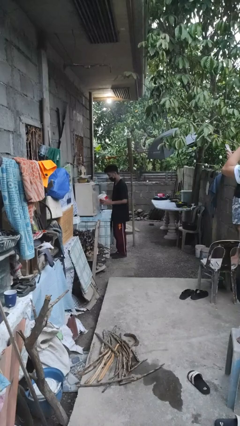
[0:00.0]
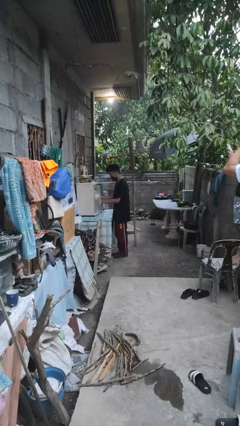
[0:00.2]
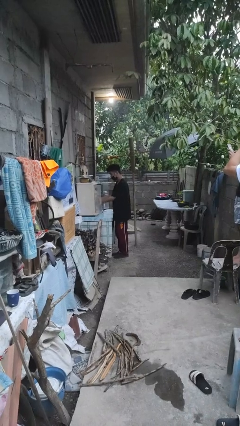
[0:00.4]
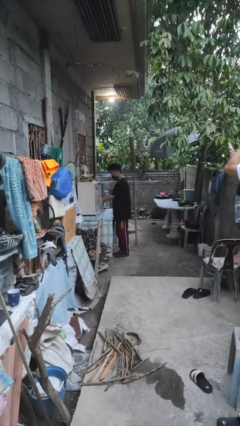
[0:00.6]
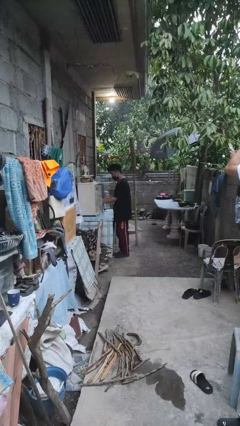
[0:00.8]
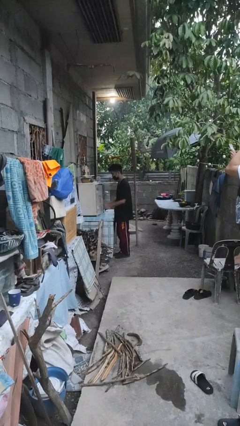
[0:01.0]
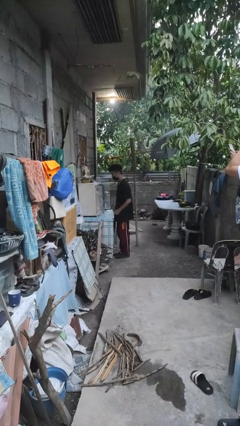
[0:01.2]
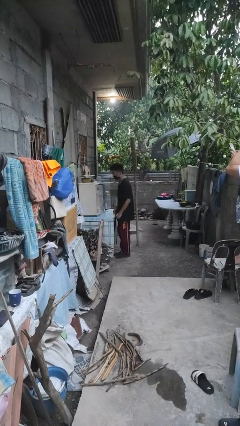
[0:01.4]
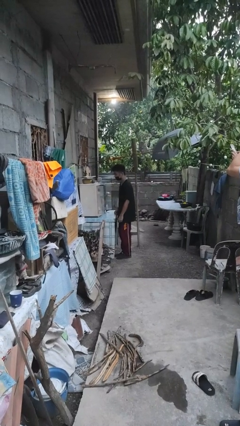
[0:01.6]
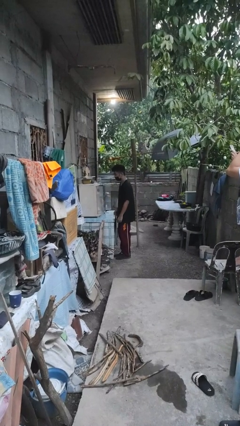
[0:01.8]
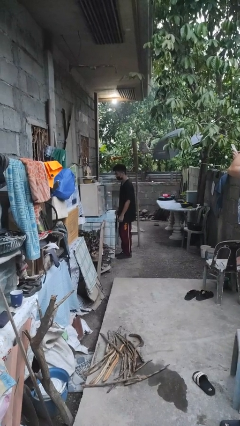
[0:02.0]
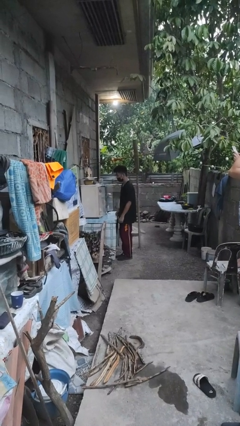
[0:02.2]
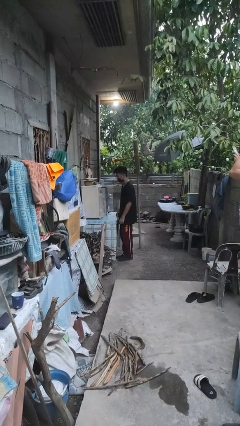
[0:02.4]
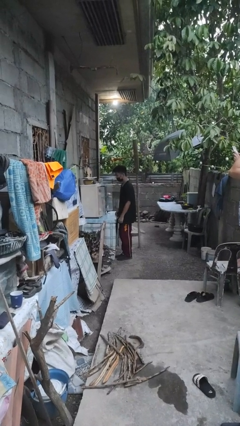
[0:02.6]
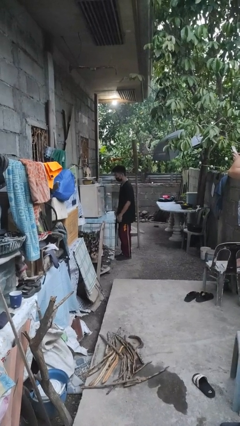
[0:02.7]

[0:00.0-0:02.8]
person puts down object into cabinet

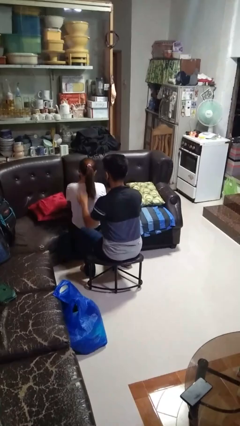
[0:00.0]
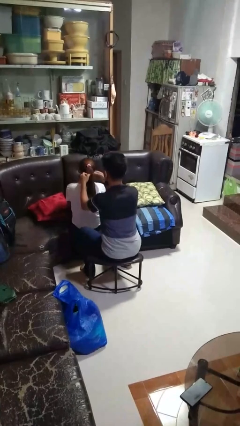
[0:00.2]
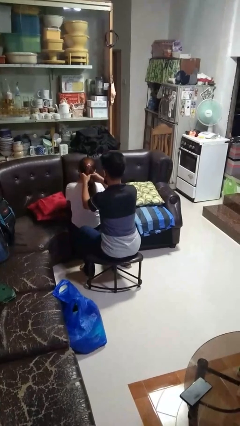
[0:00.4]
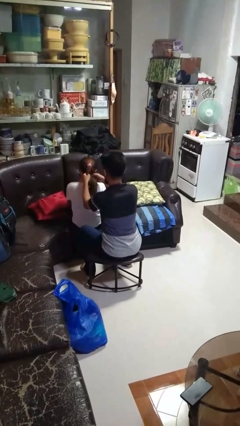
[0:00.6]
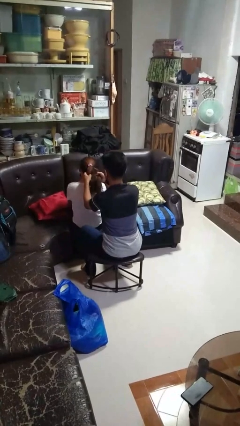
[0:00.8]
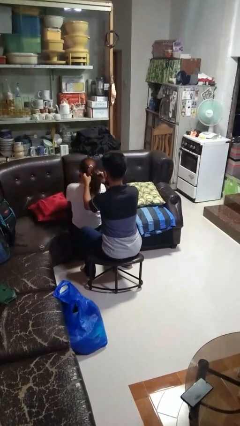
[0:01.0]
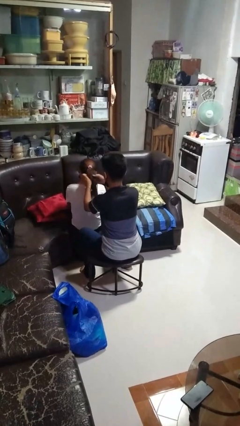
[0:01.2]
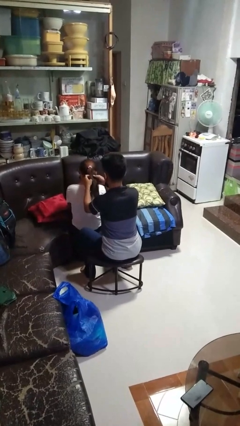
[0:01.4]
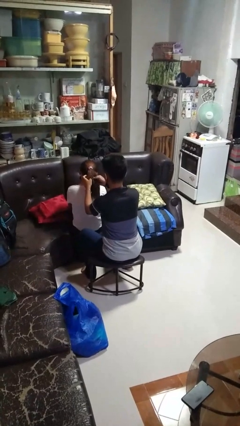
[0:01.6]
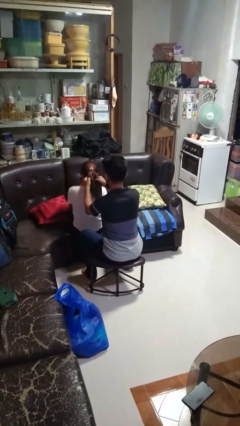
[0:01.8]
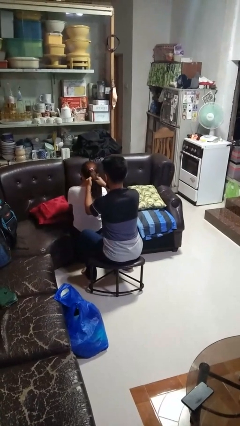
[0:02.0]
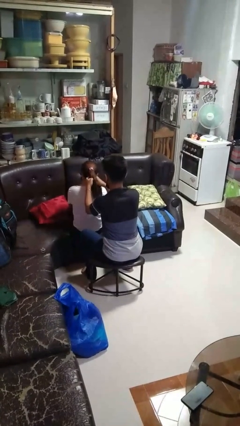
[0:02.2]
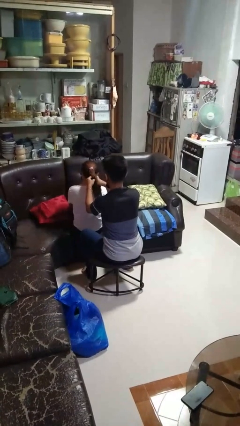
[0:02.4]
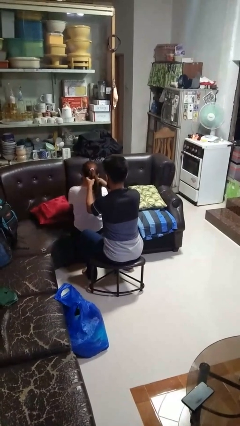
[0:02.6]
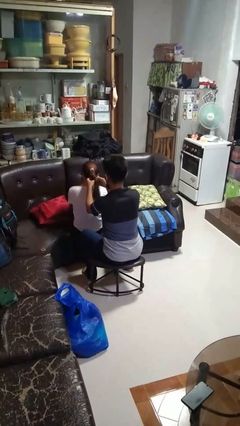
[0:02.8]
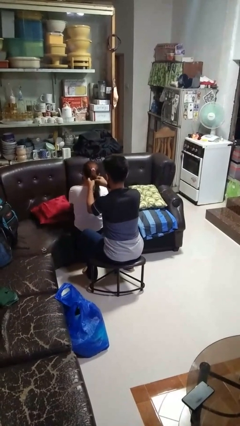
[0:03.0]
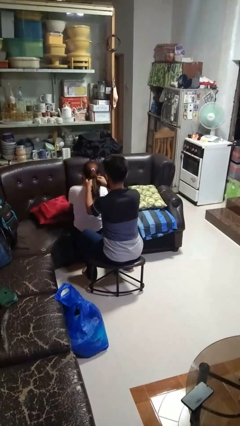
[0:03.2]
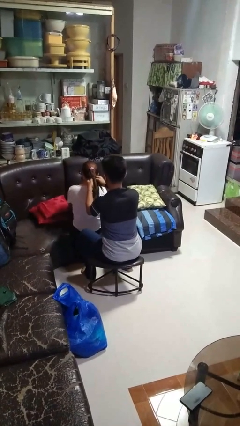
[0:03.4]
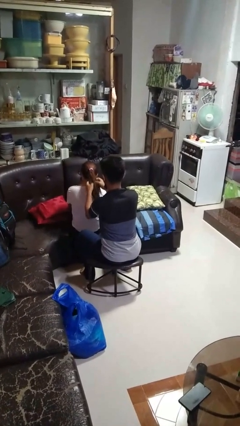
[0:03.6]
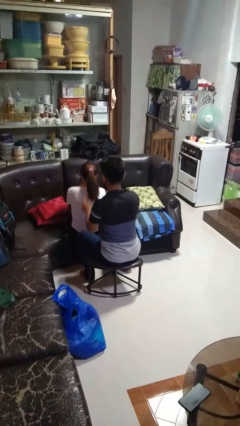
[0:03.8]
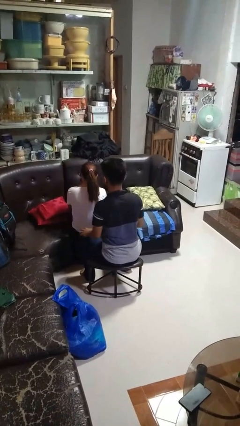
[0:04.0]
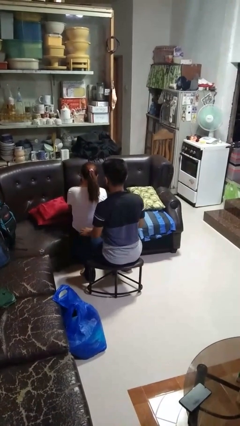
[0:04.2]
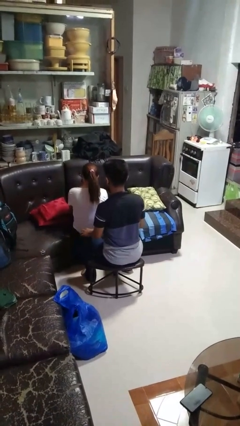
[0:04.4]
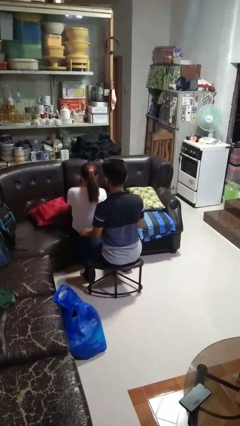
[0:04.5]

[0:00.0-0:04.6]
person braids hair of person

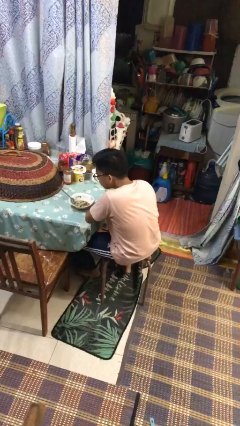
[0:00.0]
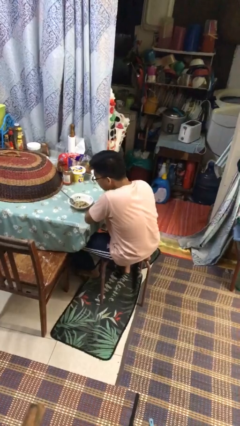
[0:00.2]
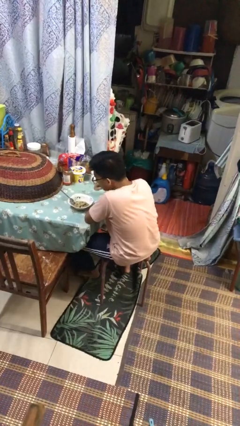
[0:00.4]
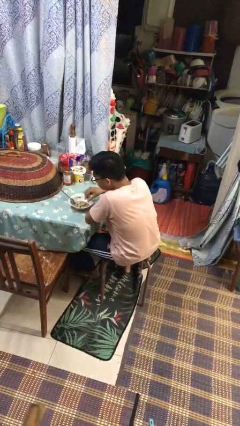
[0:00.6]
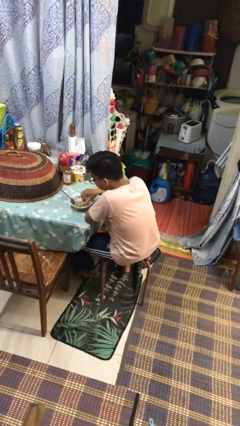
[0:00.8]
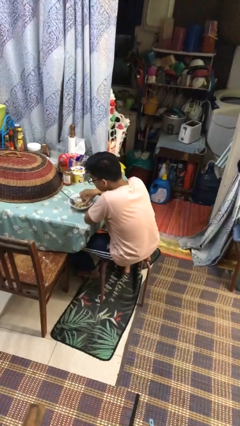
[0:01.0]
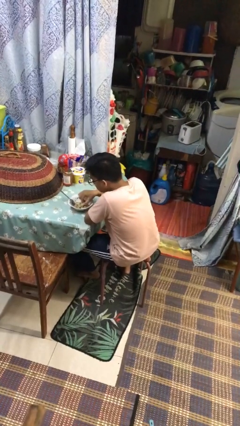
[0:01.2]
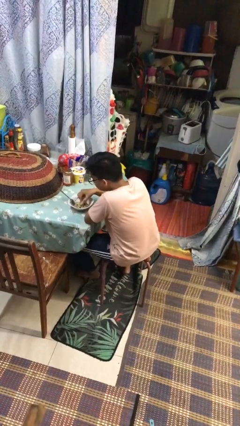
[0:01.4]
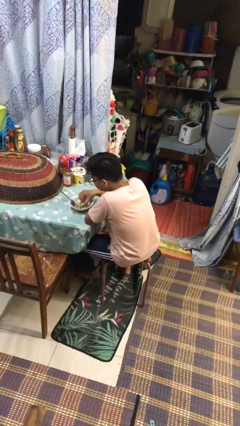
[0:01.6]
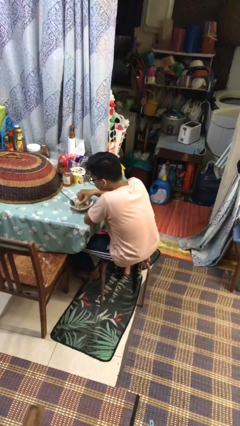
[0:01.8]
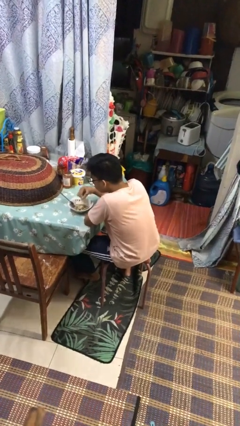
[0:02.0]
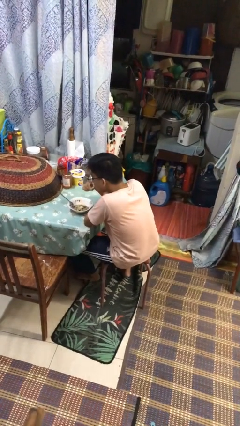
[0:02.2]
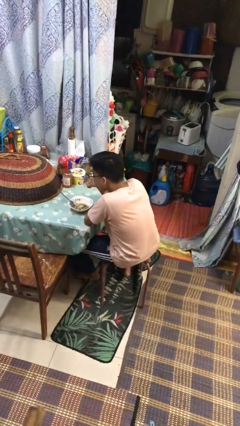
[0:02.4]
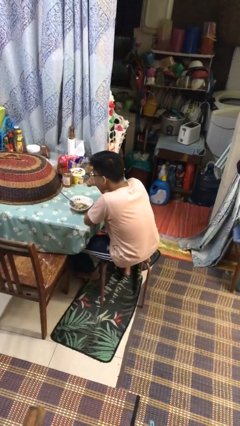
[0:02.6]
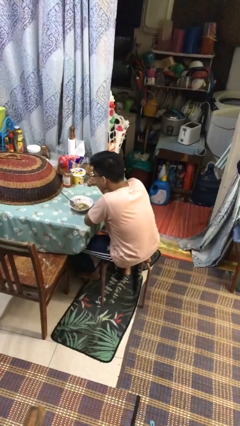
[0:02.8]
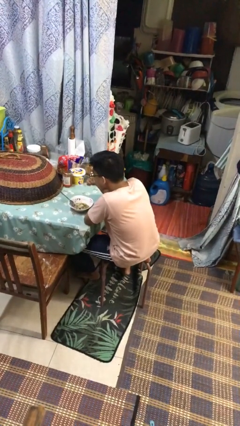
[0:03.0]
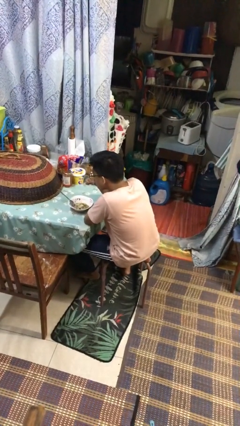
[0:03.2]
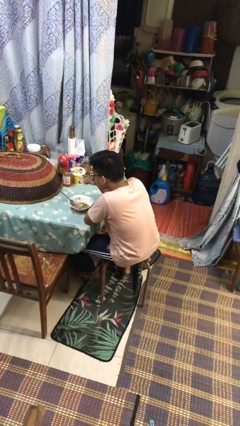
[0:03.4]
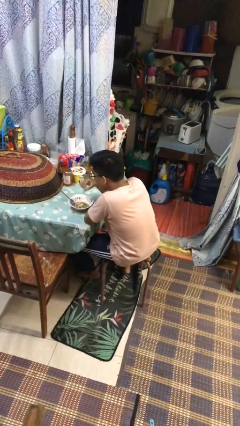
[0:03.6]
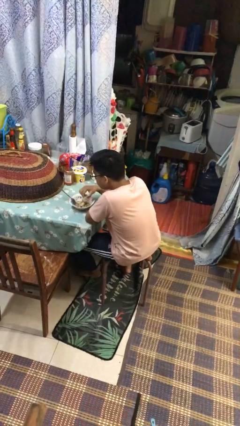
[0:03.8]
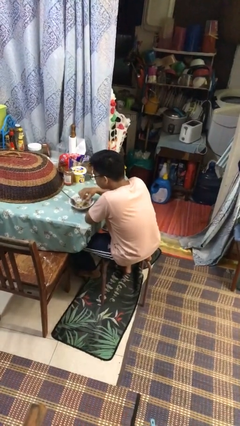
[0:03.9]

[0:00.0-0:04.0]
person eats with hands

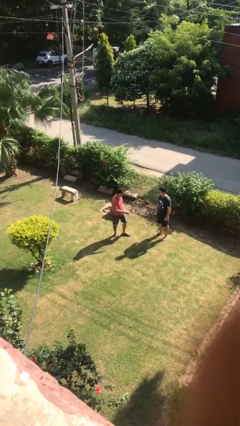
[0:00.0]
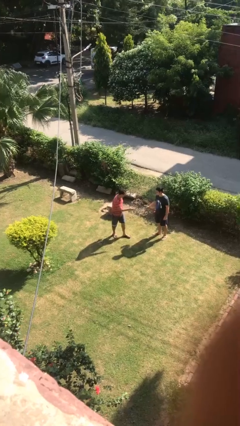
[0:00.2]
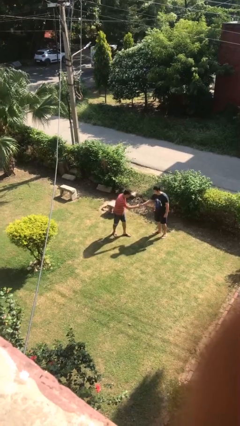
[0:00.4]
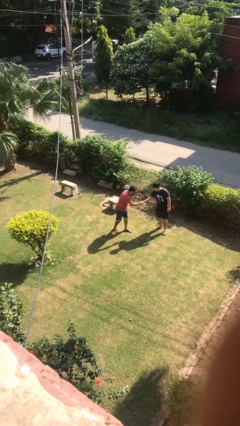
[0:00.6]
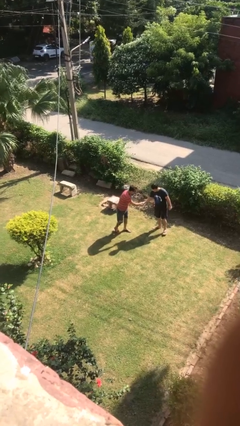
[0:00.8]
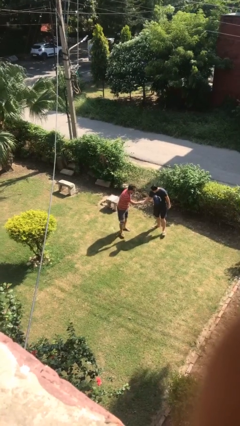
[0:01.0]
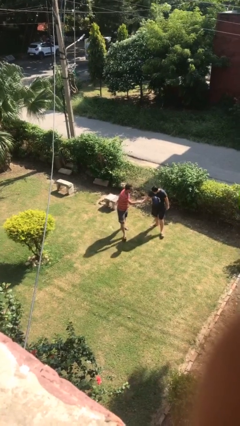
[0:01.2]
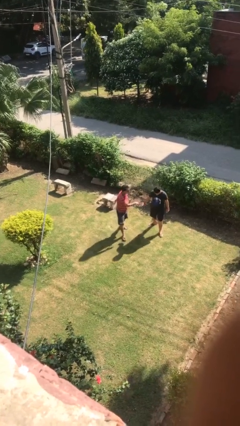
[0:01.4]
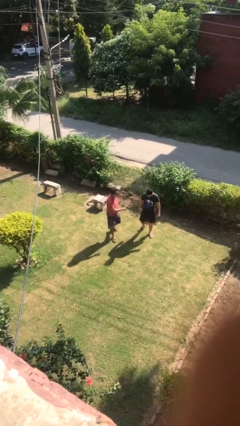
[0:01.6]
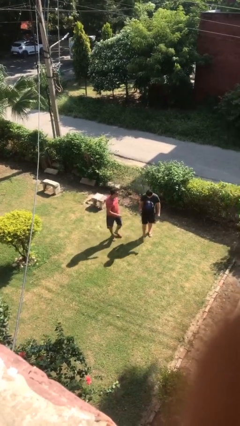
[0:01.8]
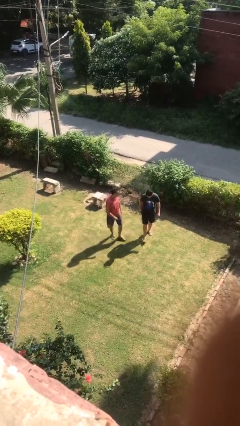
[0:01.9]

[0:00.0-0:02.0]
person shakes hand

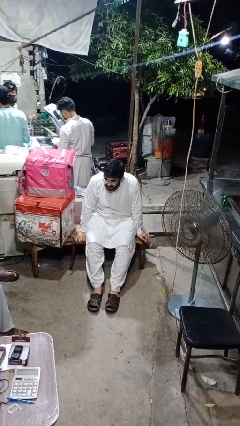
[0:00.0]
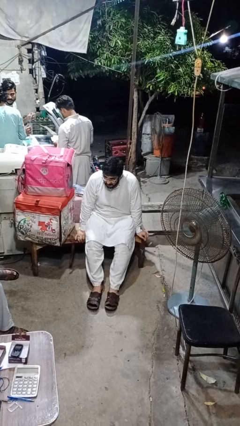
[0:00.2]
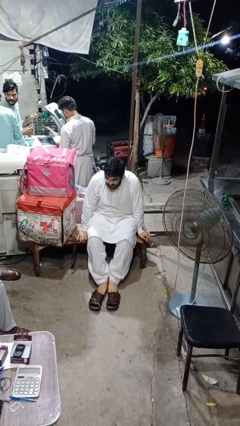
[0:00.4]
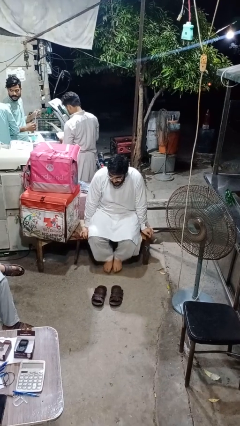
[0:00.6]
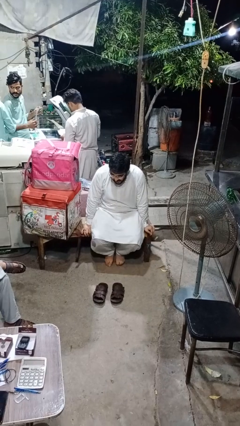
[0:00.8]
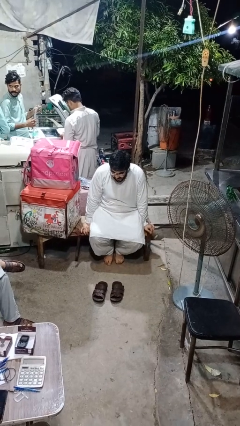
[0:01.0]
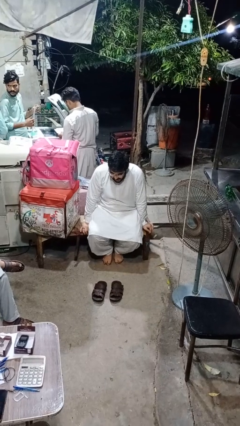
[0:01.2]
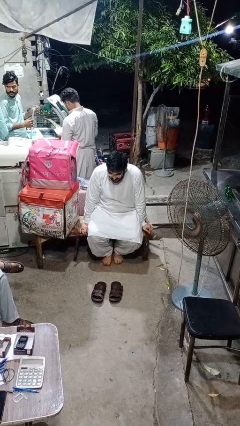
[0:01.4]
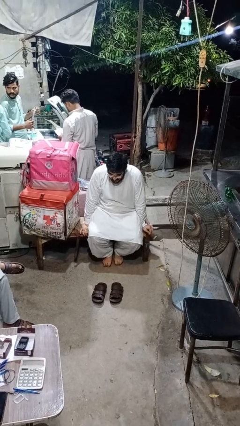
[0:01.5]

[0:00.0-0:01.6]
person takes off shoes

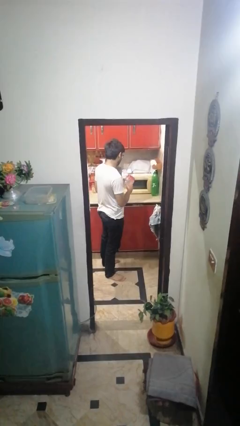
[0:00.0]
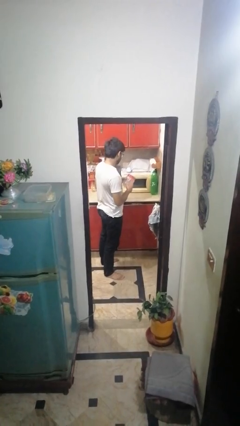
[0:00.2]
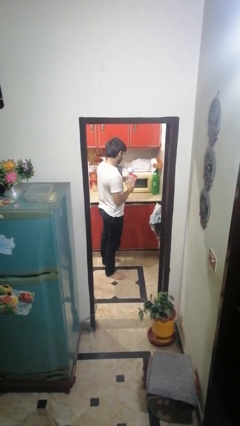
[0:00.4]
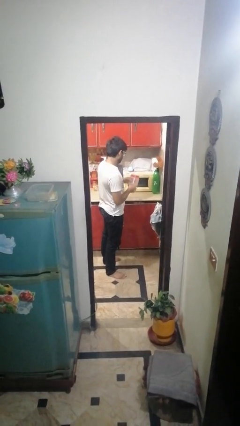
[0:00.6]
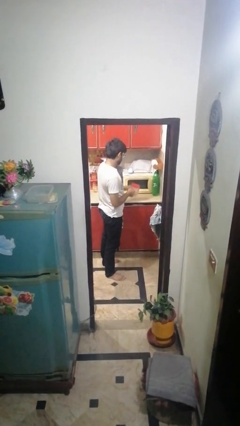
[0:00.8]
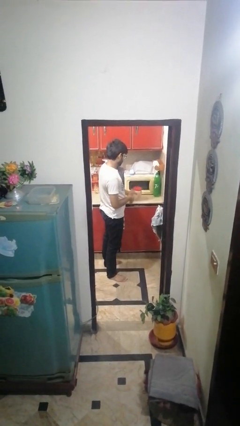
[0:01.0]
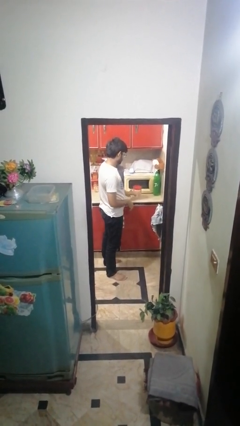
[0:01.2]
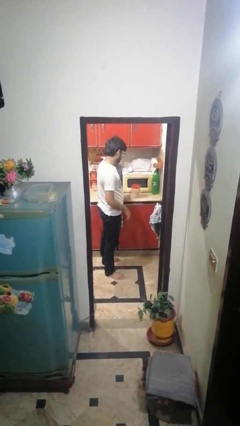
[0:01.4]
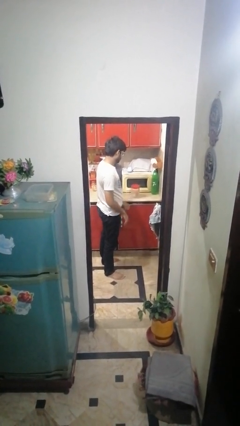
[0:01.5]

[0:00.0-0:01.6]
person puts down object on countertop

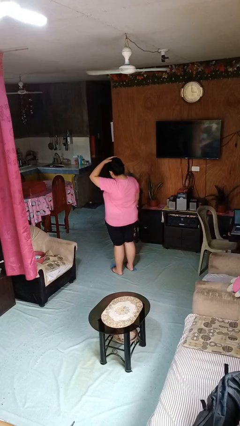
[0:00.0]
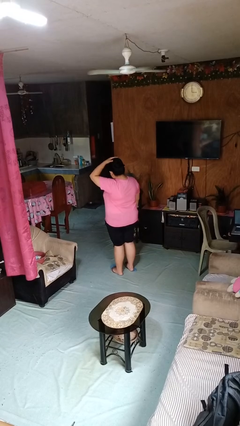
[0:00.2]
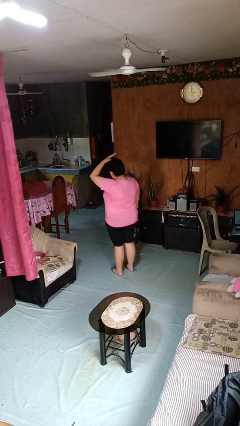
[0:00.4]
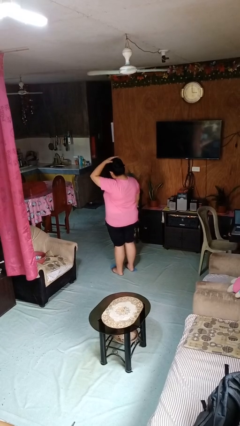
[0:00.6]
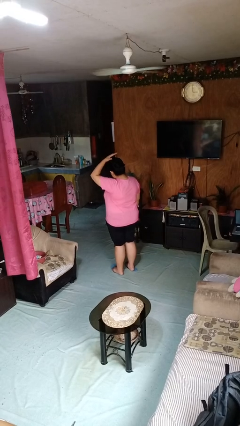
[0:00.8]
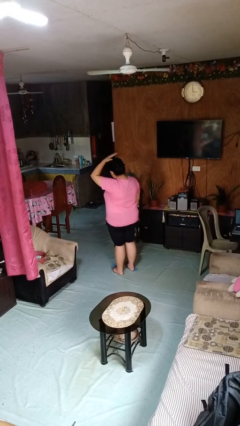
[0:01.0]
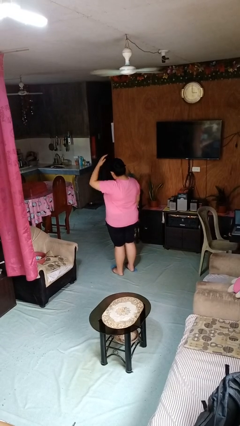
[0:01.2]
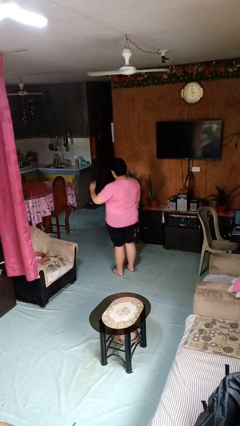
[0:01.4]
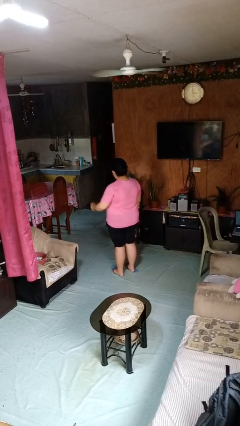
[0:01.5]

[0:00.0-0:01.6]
person pats head
